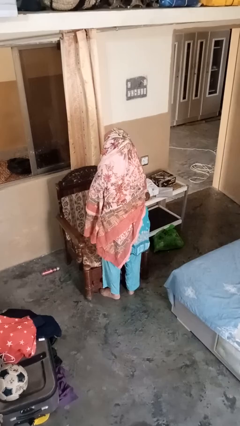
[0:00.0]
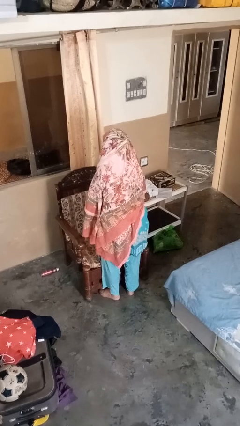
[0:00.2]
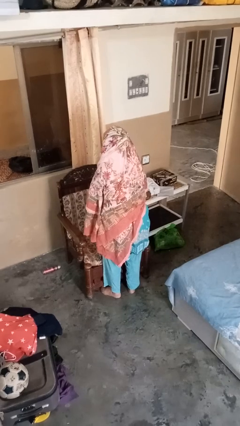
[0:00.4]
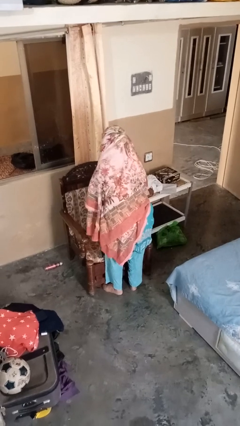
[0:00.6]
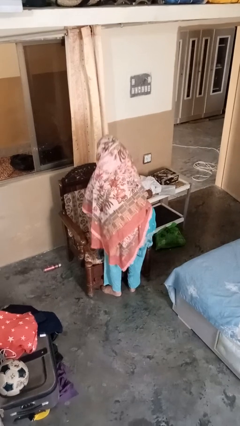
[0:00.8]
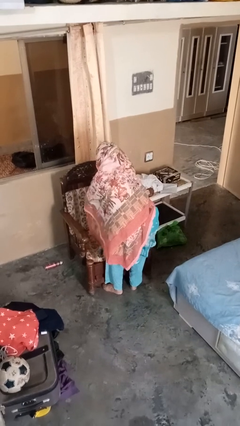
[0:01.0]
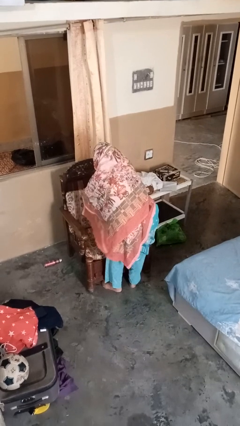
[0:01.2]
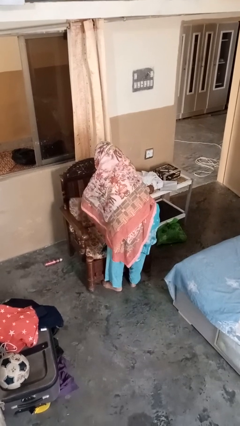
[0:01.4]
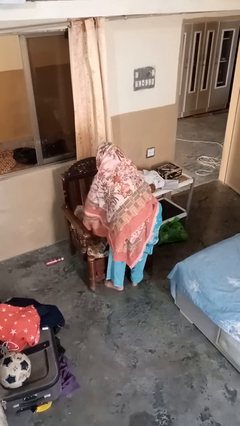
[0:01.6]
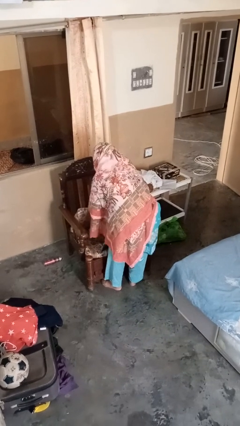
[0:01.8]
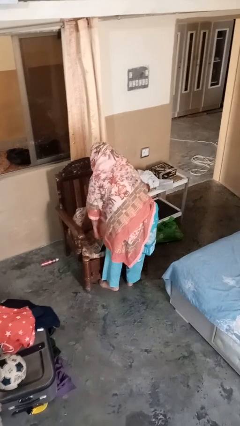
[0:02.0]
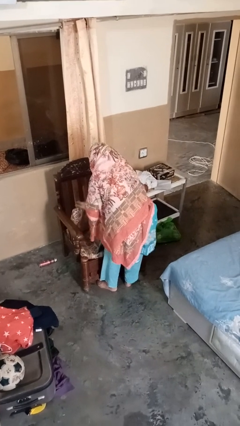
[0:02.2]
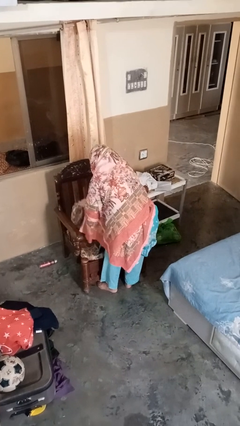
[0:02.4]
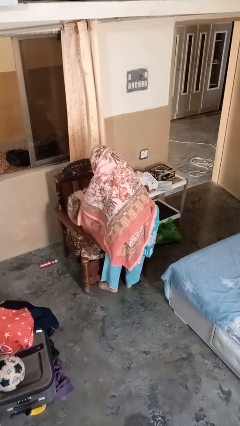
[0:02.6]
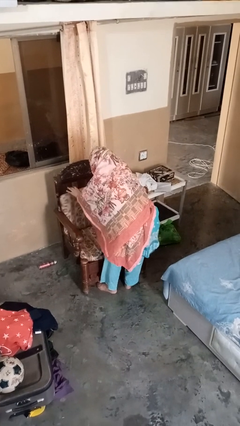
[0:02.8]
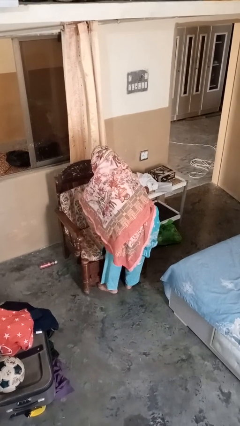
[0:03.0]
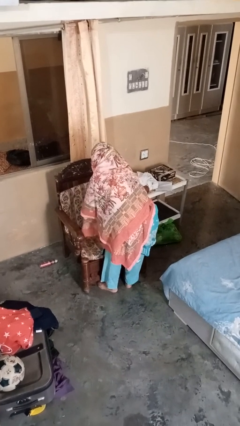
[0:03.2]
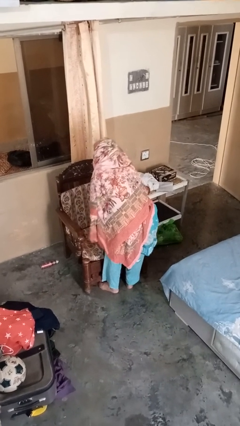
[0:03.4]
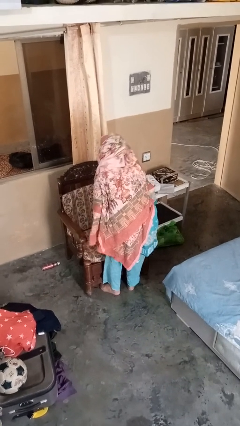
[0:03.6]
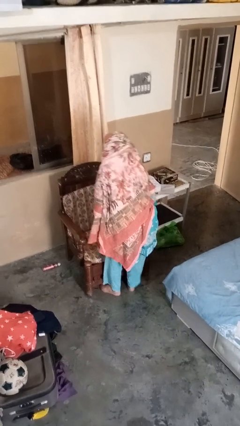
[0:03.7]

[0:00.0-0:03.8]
person searches in couch

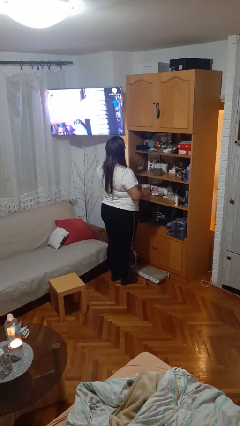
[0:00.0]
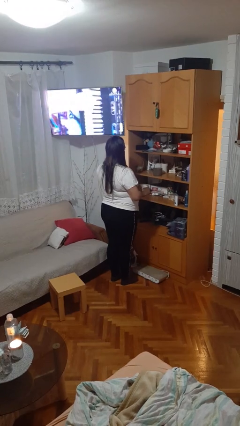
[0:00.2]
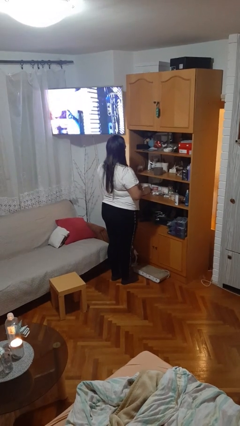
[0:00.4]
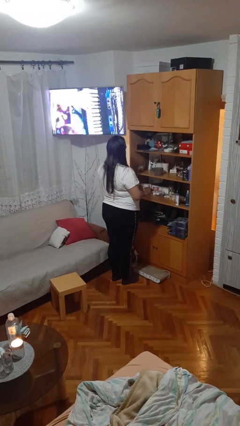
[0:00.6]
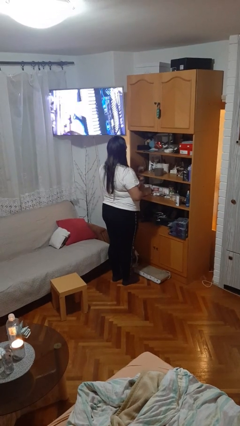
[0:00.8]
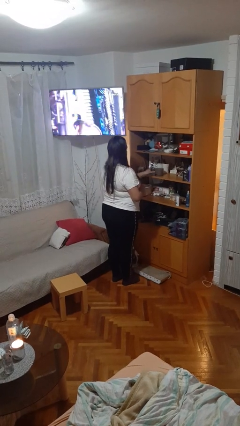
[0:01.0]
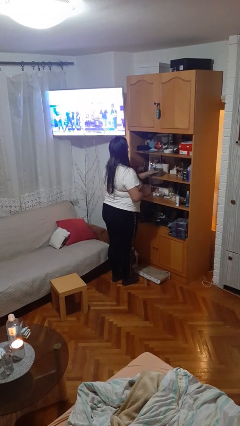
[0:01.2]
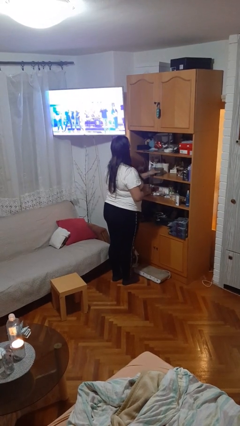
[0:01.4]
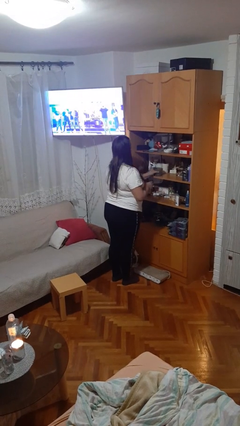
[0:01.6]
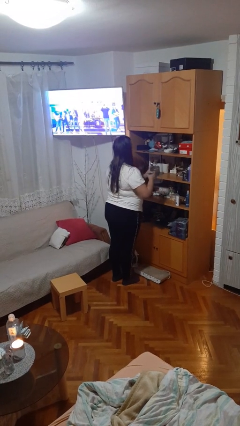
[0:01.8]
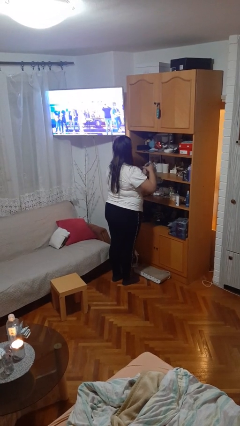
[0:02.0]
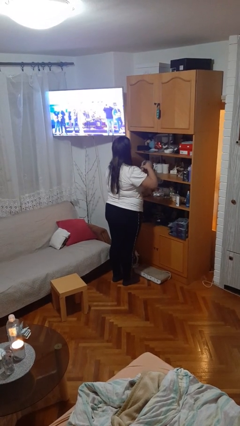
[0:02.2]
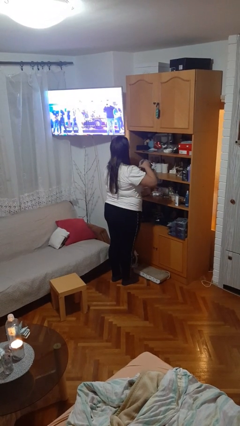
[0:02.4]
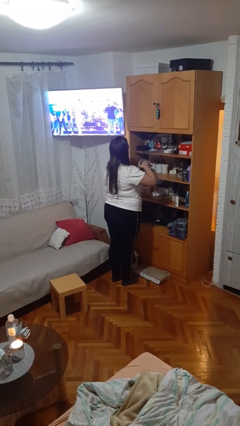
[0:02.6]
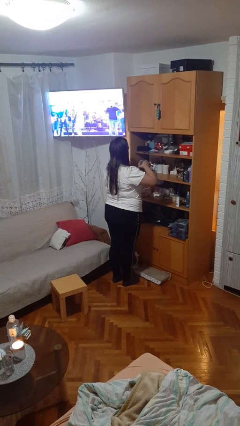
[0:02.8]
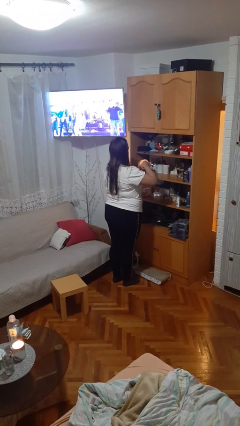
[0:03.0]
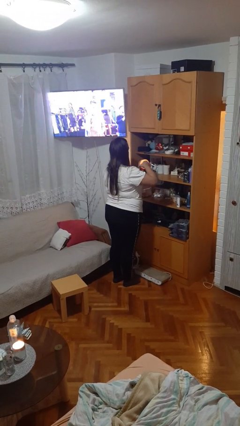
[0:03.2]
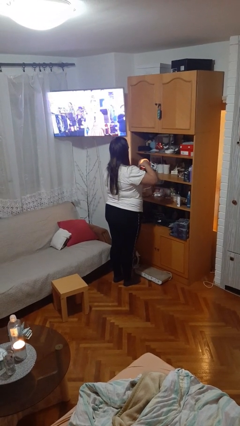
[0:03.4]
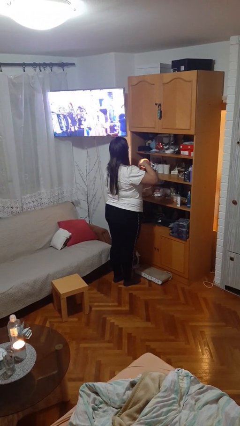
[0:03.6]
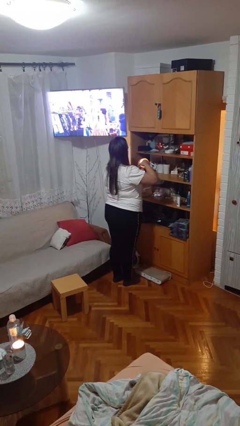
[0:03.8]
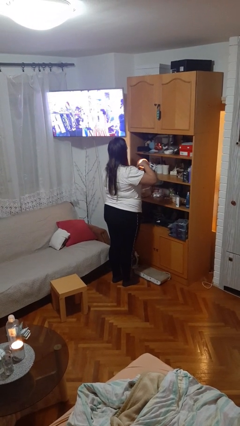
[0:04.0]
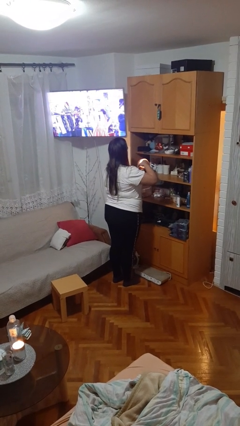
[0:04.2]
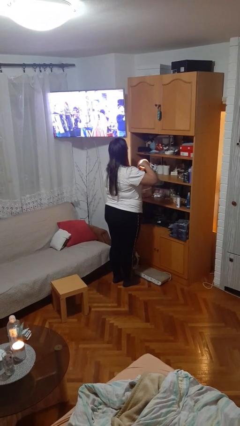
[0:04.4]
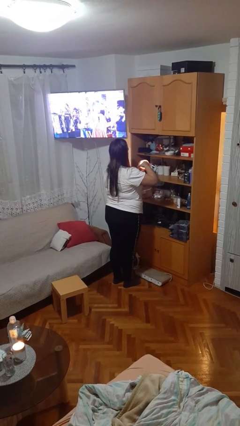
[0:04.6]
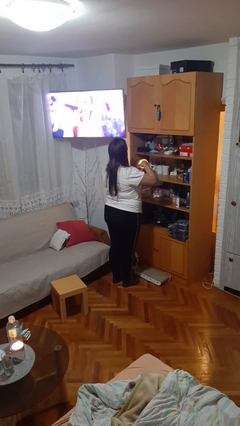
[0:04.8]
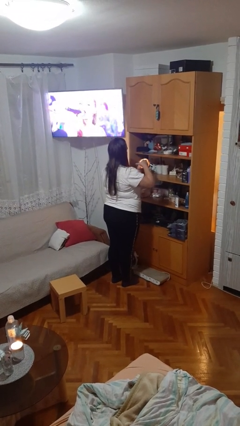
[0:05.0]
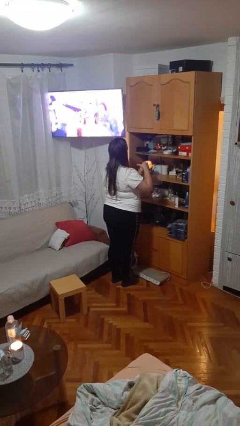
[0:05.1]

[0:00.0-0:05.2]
person lights candle

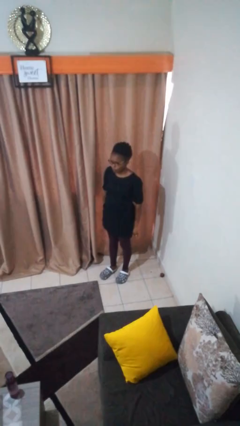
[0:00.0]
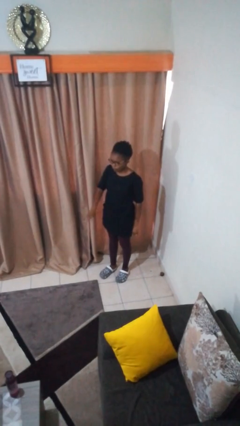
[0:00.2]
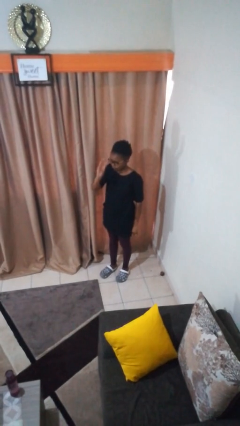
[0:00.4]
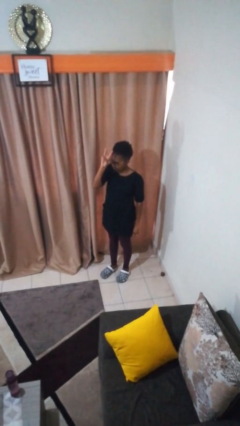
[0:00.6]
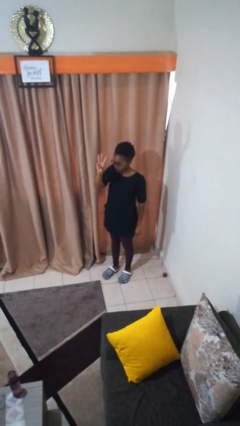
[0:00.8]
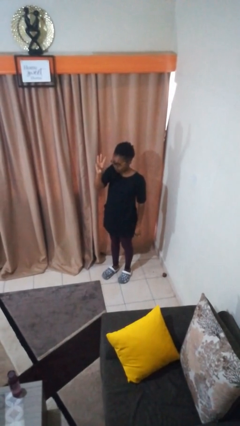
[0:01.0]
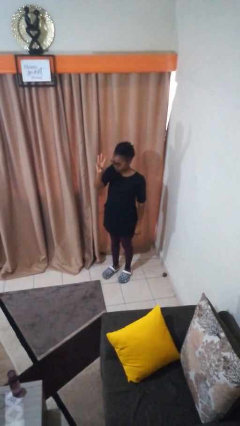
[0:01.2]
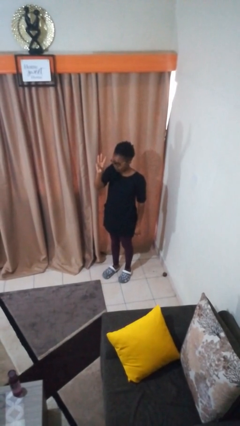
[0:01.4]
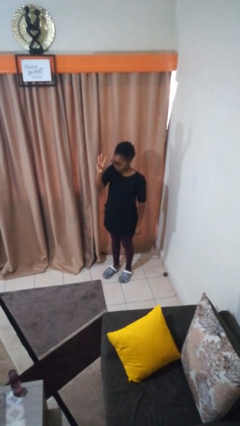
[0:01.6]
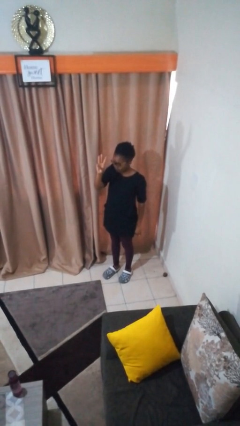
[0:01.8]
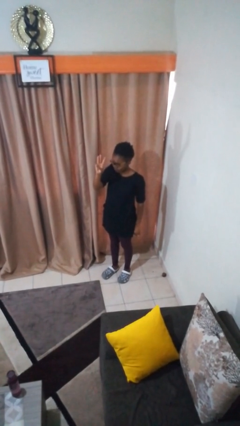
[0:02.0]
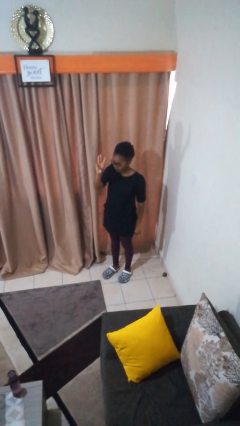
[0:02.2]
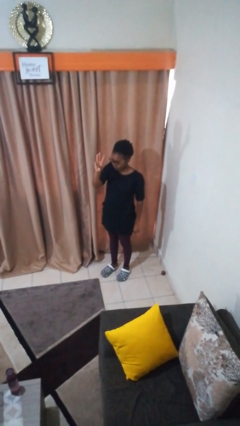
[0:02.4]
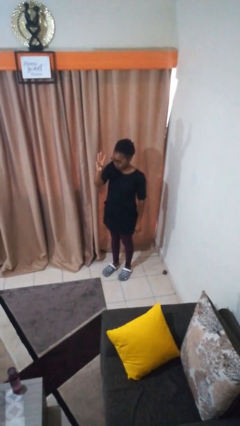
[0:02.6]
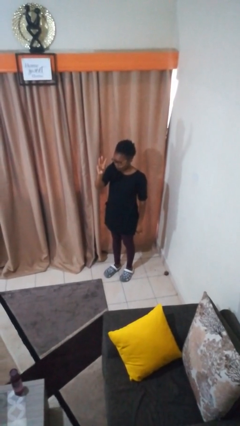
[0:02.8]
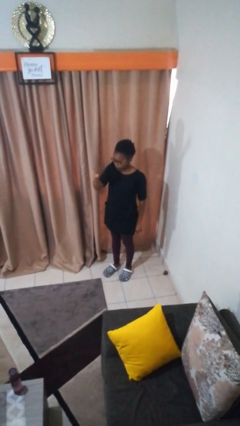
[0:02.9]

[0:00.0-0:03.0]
person gestures number three

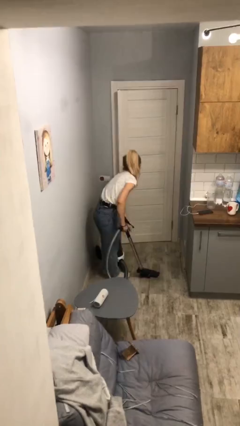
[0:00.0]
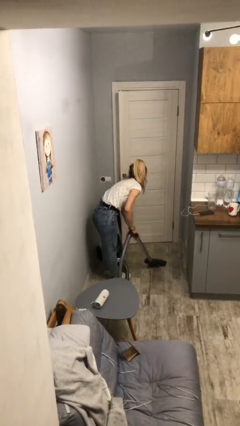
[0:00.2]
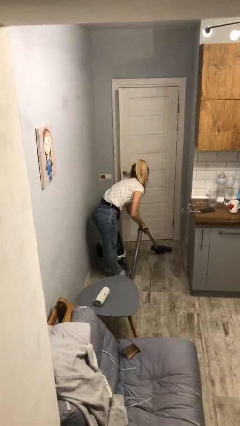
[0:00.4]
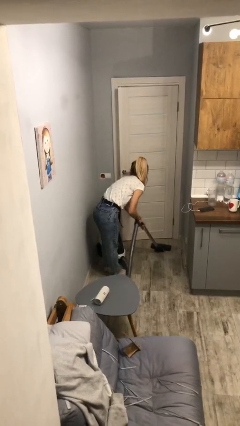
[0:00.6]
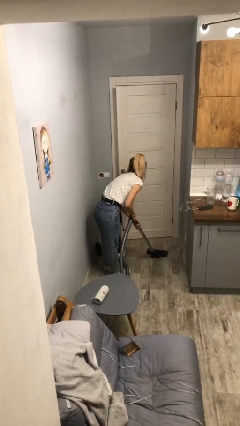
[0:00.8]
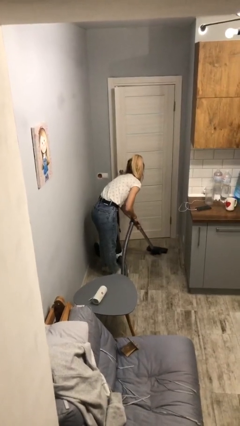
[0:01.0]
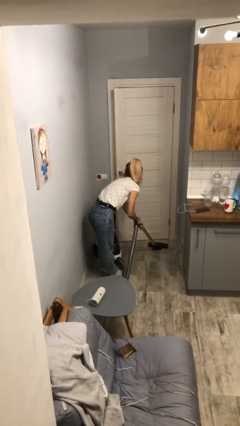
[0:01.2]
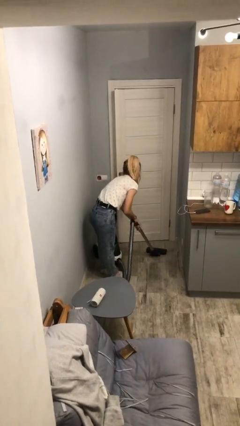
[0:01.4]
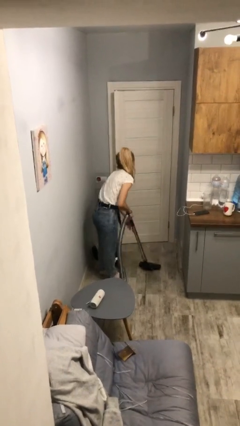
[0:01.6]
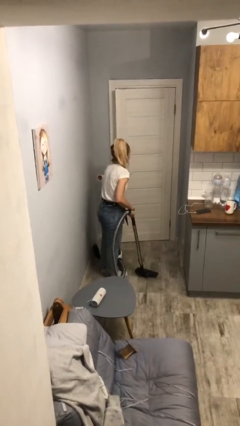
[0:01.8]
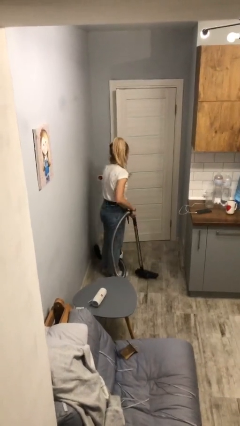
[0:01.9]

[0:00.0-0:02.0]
person vacuums carpet

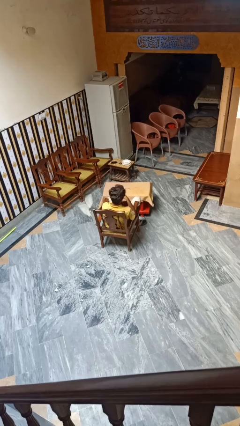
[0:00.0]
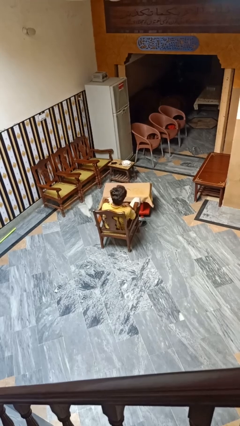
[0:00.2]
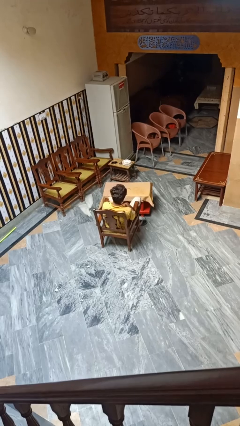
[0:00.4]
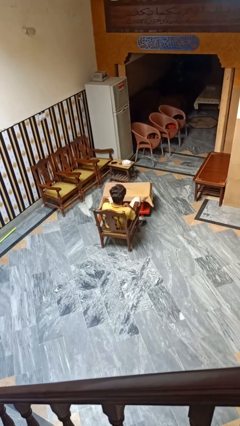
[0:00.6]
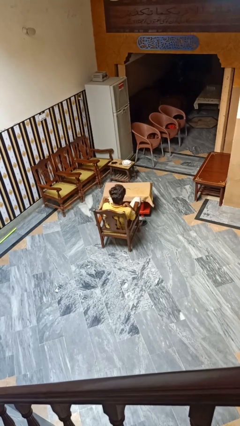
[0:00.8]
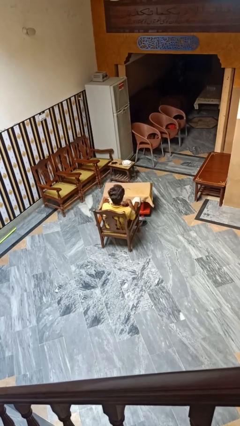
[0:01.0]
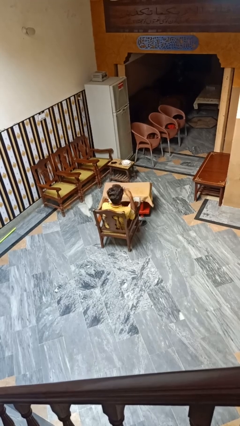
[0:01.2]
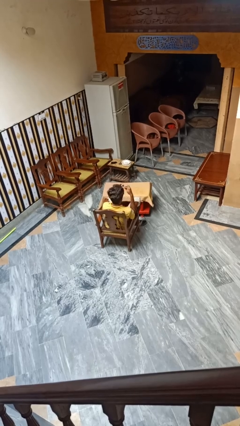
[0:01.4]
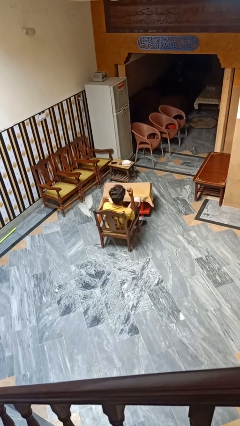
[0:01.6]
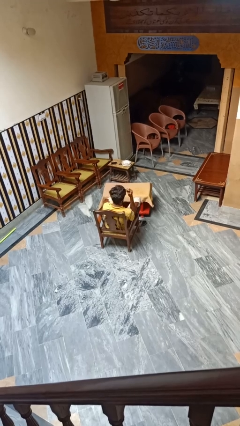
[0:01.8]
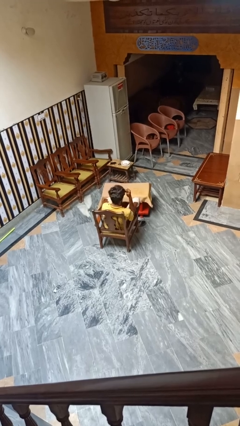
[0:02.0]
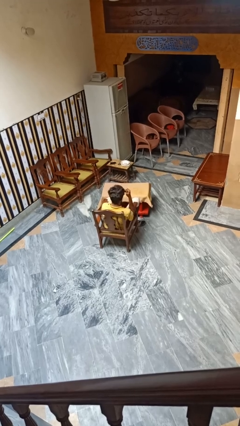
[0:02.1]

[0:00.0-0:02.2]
person clips fingernails

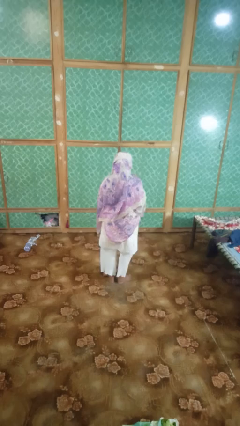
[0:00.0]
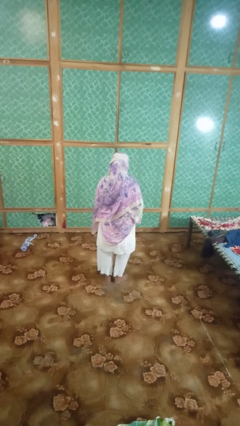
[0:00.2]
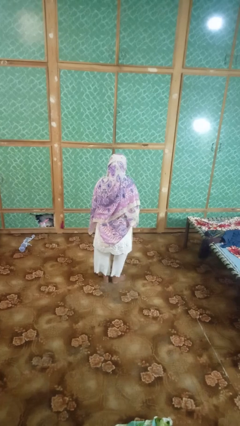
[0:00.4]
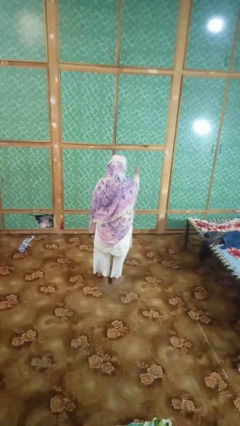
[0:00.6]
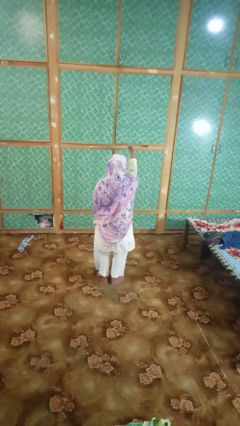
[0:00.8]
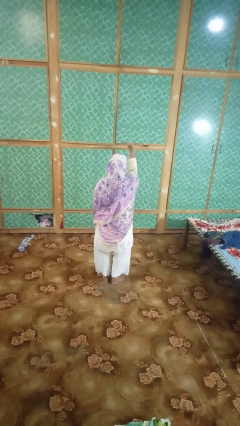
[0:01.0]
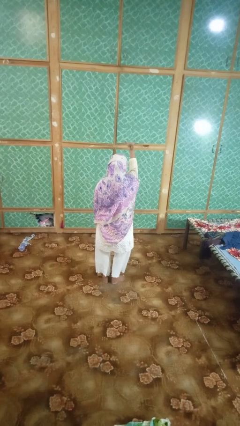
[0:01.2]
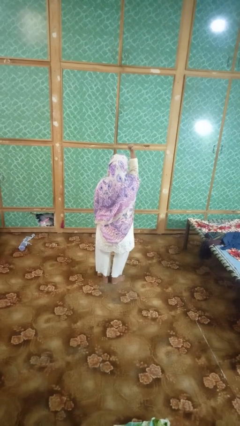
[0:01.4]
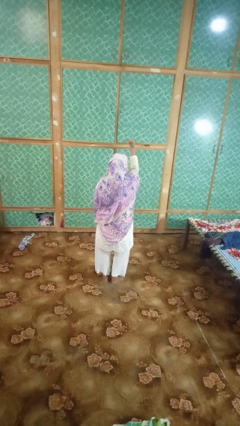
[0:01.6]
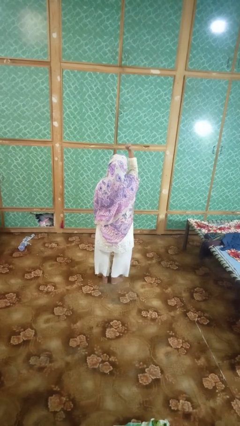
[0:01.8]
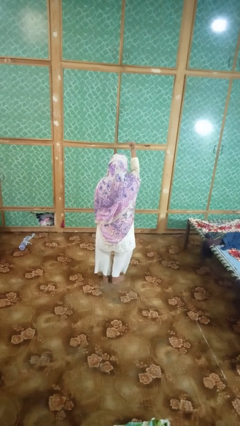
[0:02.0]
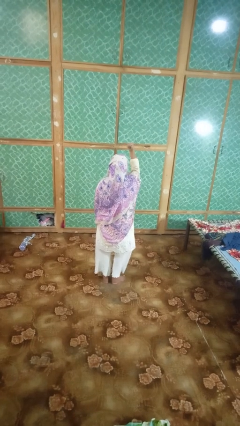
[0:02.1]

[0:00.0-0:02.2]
person gestures hang loose
